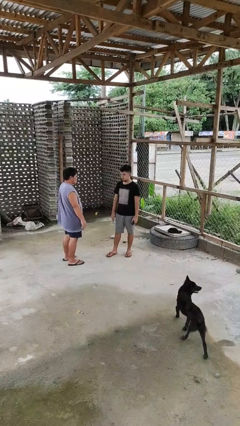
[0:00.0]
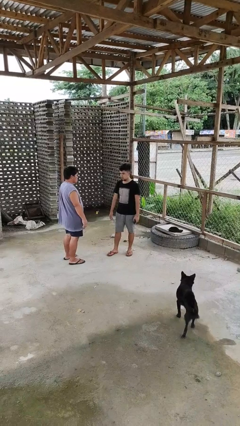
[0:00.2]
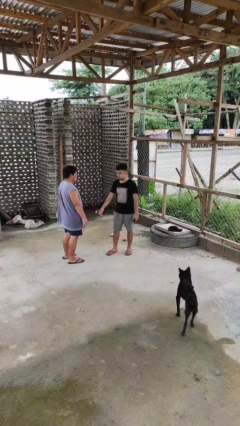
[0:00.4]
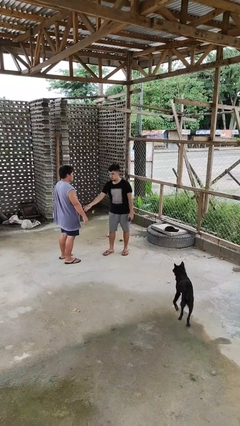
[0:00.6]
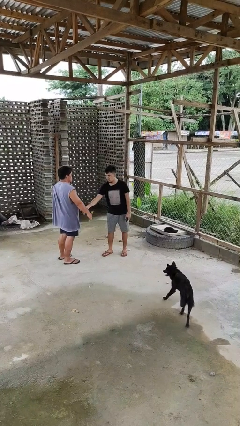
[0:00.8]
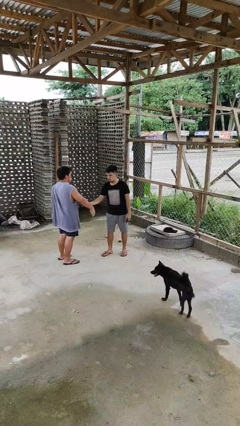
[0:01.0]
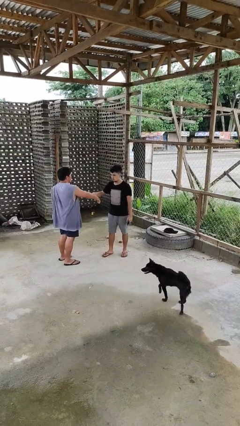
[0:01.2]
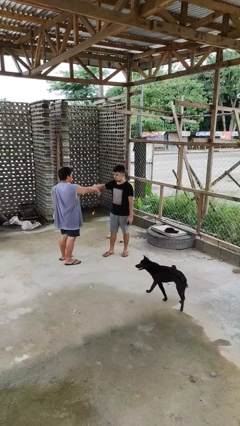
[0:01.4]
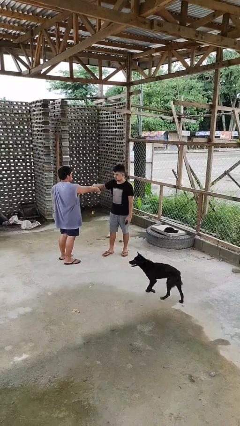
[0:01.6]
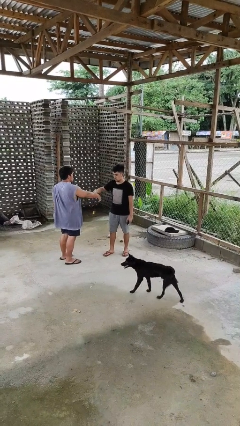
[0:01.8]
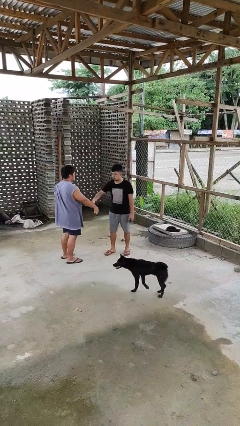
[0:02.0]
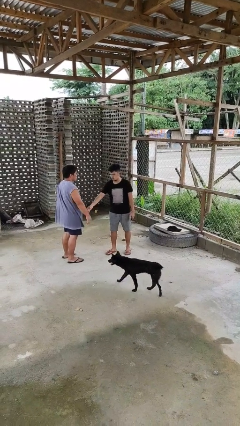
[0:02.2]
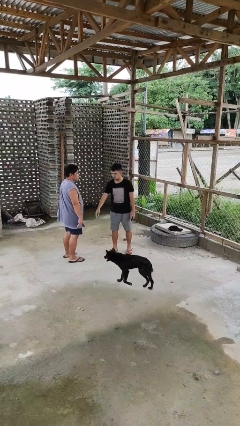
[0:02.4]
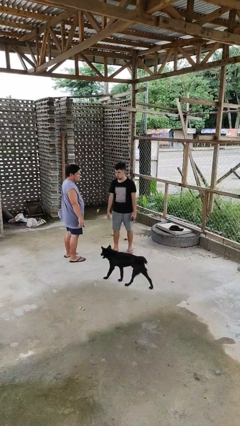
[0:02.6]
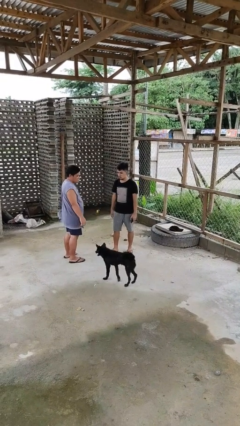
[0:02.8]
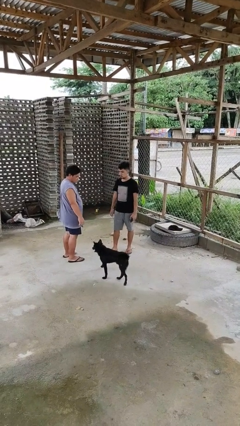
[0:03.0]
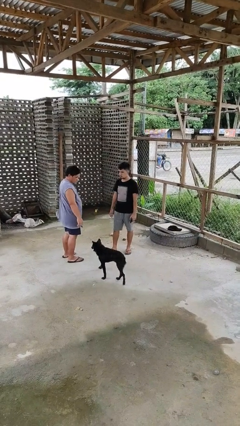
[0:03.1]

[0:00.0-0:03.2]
person grabs person by forearm

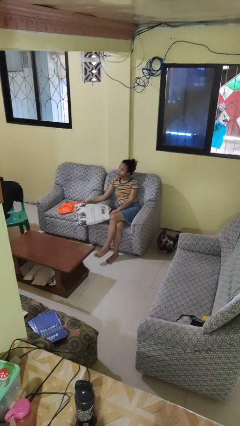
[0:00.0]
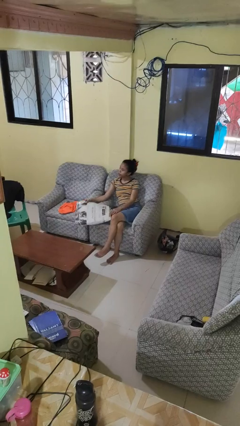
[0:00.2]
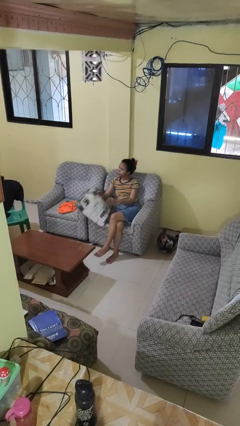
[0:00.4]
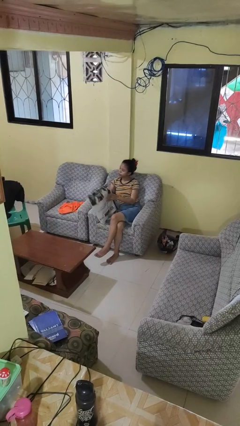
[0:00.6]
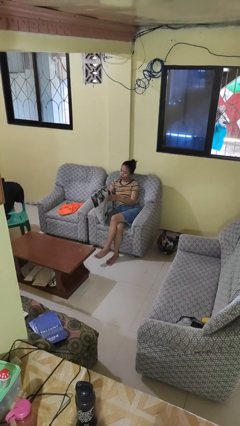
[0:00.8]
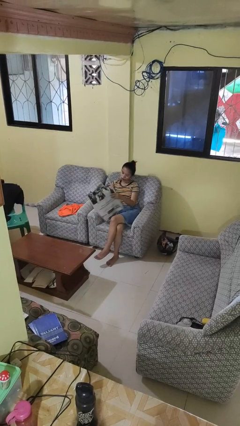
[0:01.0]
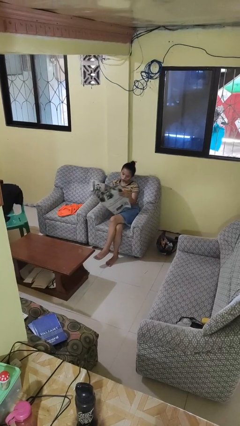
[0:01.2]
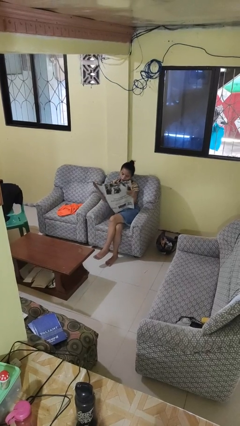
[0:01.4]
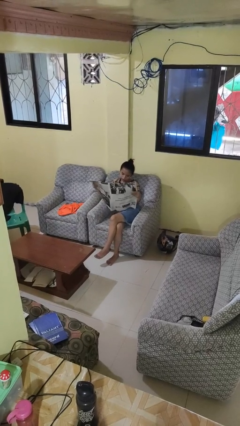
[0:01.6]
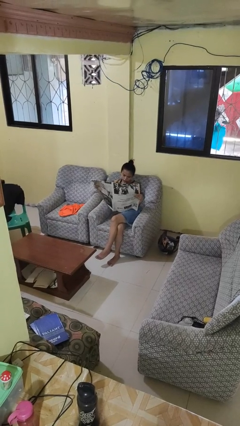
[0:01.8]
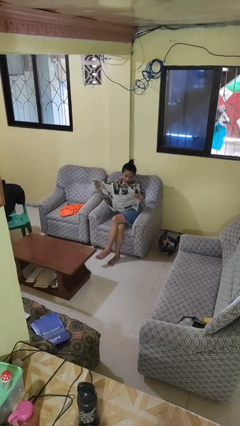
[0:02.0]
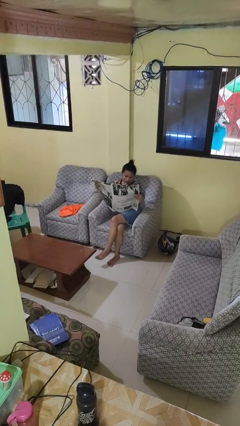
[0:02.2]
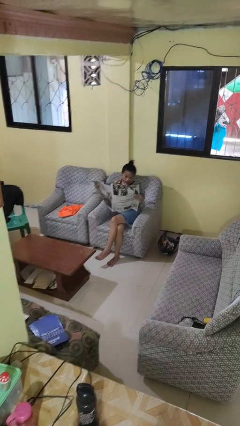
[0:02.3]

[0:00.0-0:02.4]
person reads newspaper

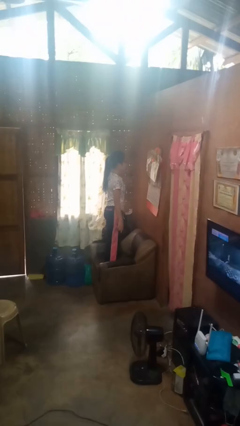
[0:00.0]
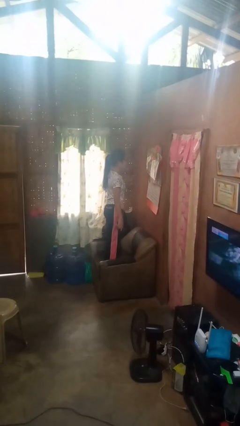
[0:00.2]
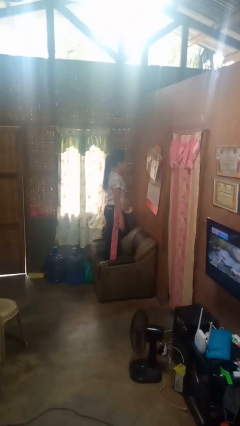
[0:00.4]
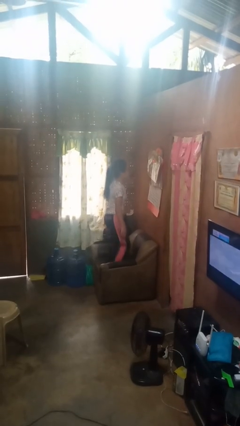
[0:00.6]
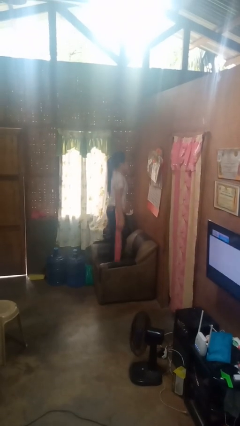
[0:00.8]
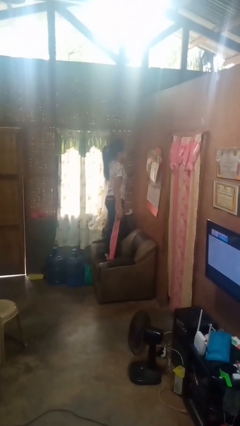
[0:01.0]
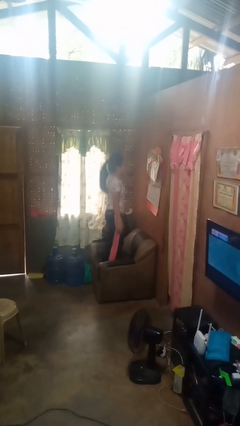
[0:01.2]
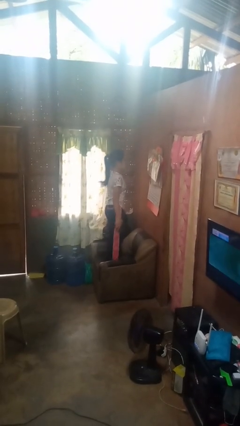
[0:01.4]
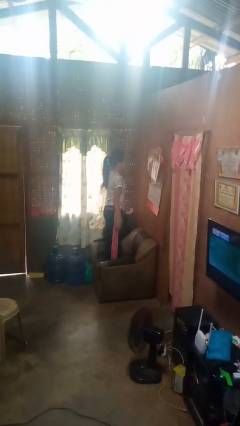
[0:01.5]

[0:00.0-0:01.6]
person jumps on couch

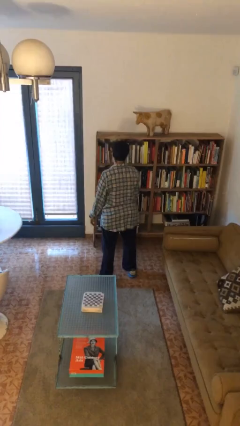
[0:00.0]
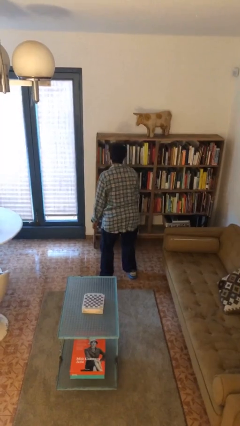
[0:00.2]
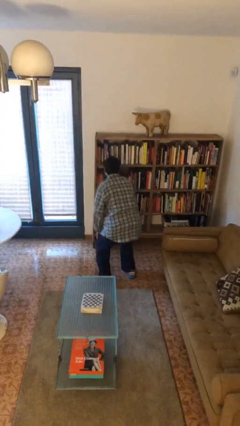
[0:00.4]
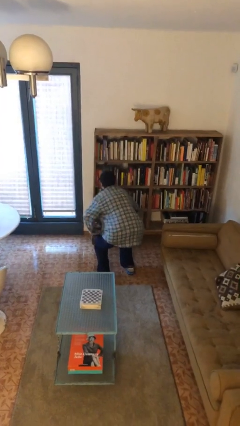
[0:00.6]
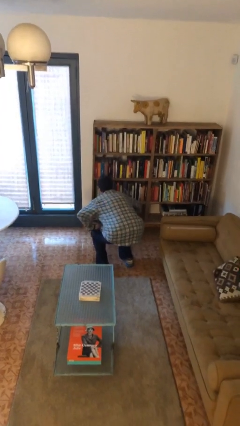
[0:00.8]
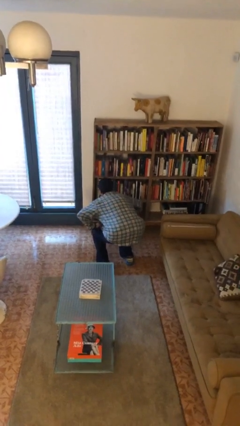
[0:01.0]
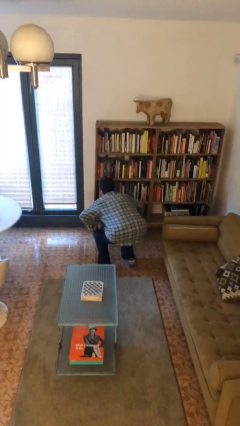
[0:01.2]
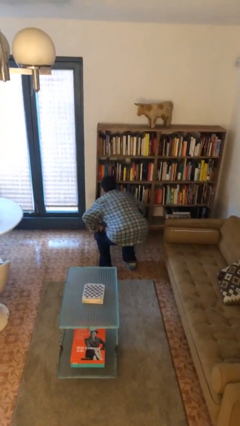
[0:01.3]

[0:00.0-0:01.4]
person squats

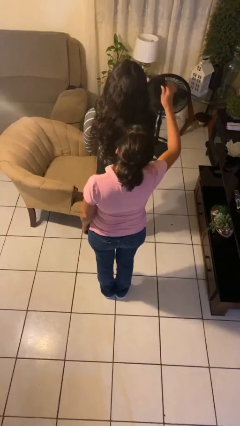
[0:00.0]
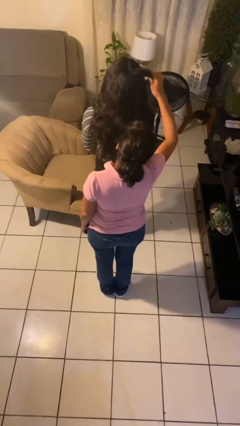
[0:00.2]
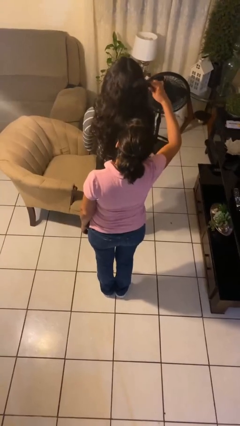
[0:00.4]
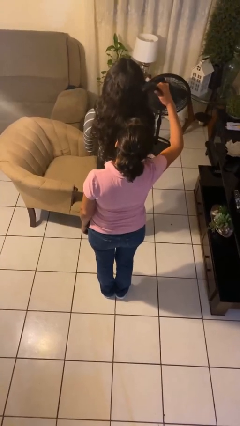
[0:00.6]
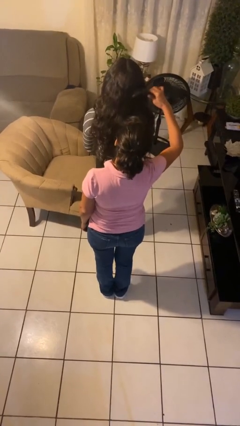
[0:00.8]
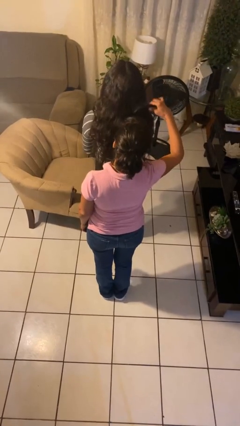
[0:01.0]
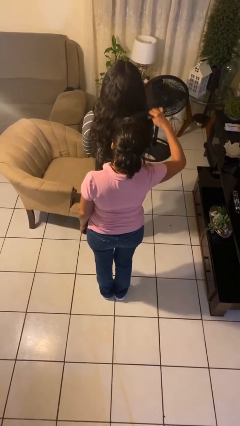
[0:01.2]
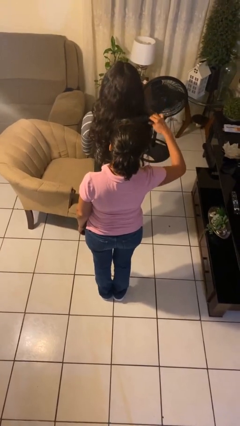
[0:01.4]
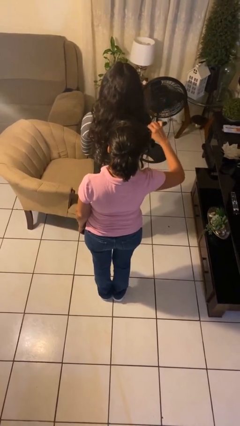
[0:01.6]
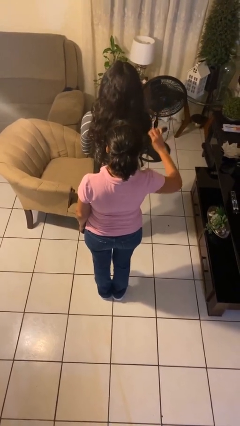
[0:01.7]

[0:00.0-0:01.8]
person brushes hair of person

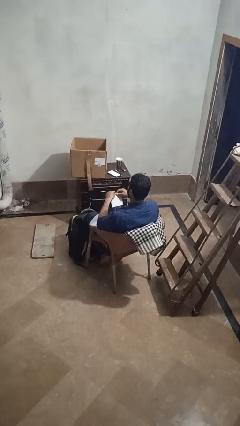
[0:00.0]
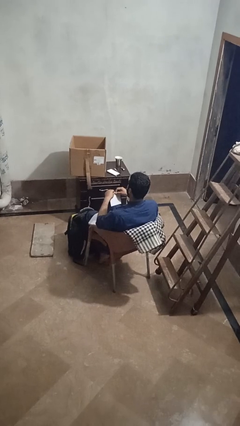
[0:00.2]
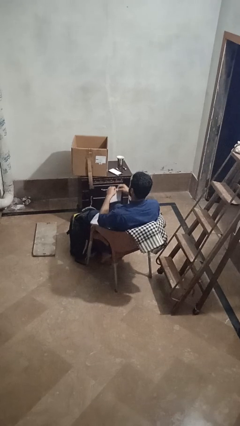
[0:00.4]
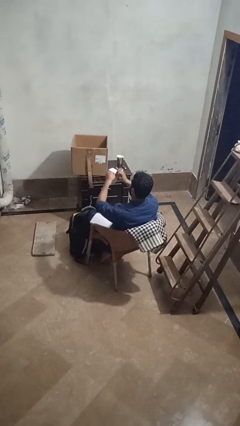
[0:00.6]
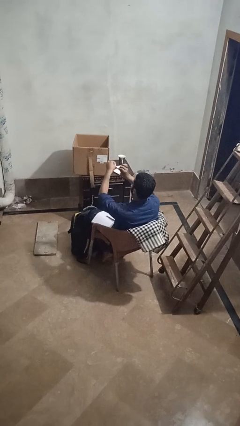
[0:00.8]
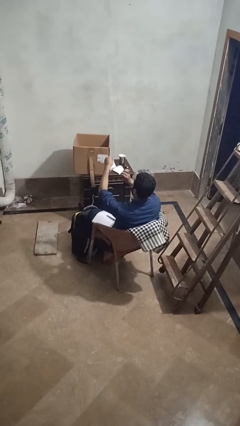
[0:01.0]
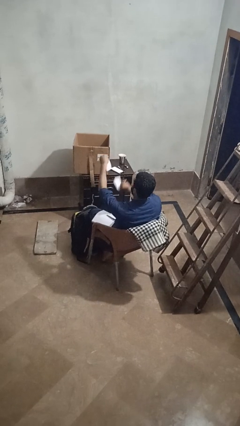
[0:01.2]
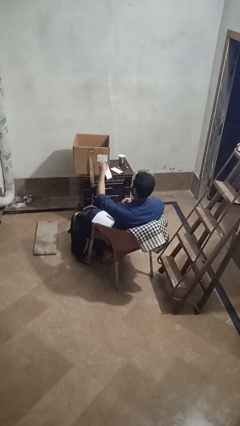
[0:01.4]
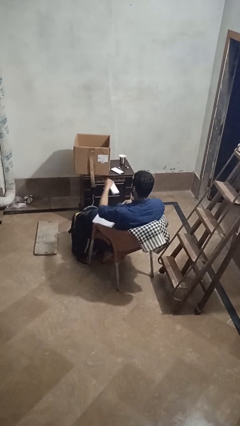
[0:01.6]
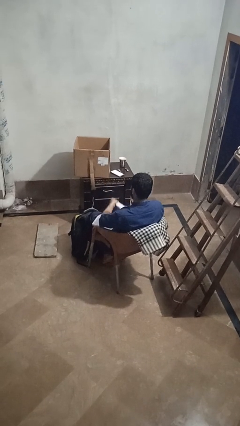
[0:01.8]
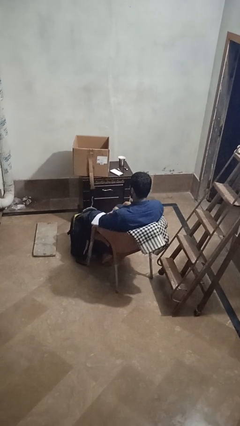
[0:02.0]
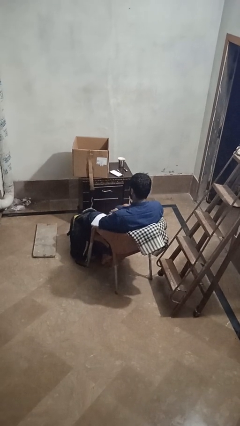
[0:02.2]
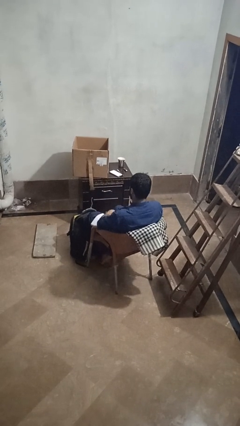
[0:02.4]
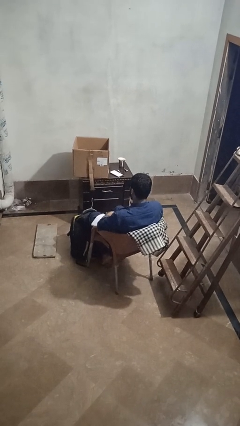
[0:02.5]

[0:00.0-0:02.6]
person tears paper

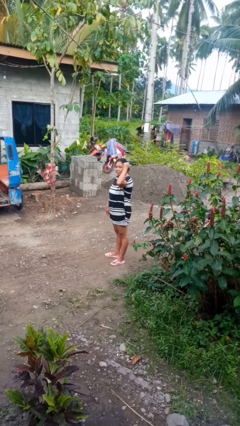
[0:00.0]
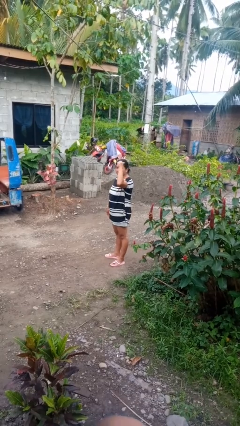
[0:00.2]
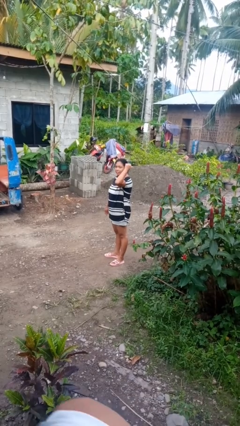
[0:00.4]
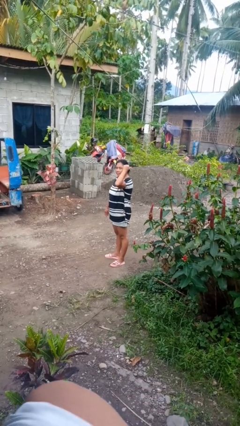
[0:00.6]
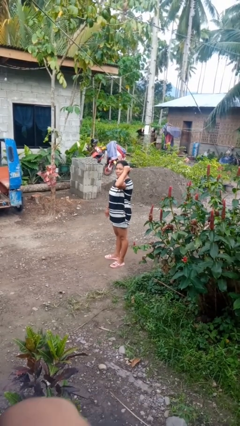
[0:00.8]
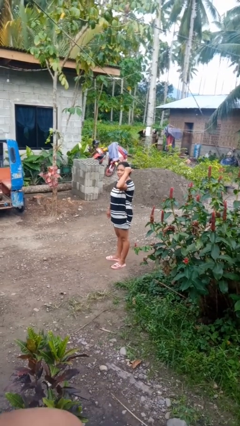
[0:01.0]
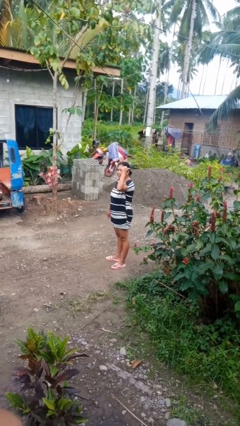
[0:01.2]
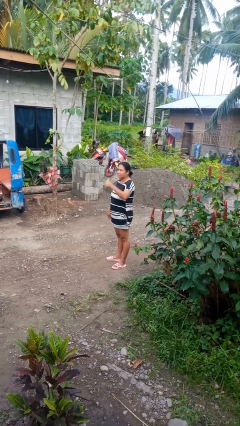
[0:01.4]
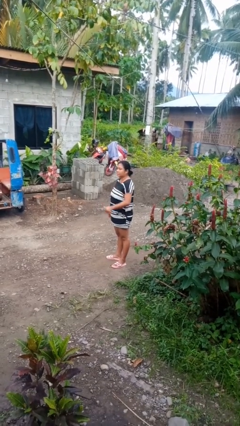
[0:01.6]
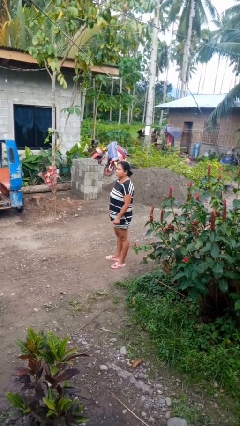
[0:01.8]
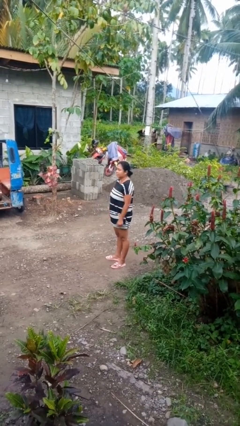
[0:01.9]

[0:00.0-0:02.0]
person gestures behind me

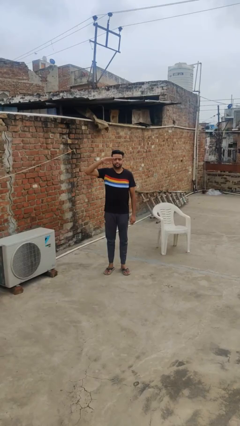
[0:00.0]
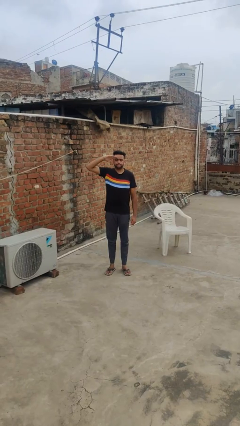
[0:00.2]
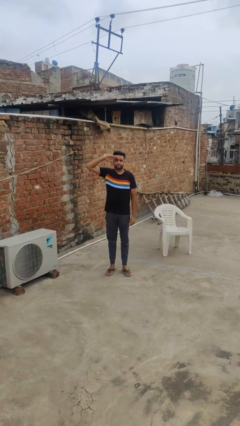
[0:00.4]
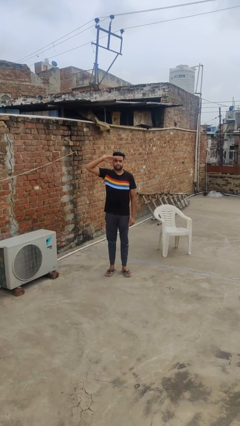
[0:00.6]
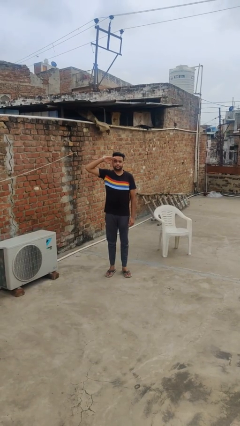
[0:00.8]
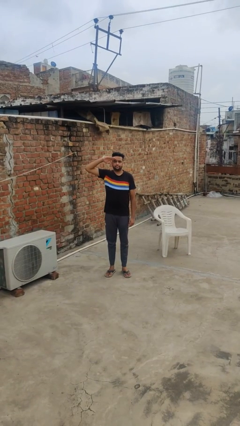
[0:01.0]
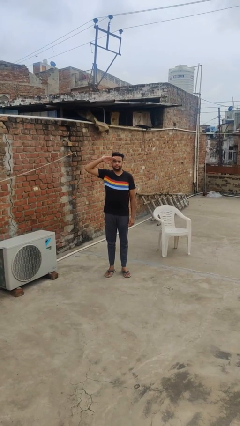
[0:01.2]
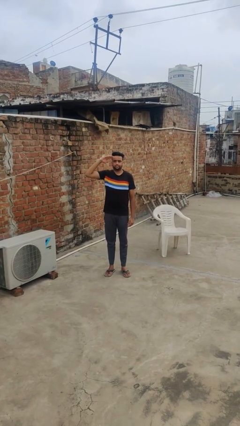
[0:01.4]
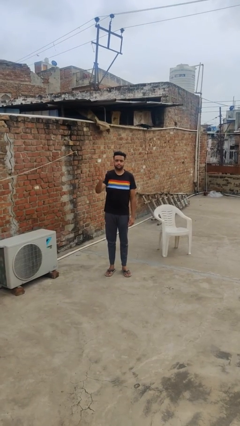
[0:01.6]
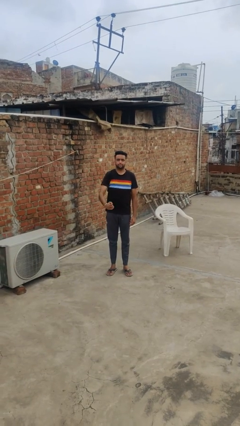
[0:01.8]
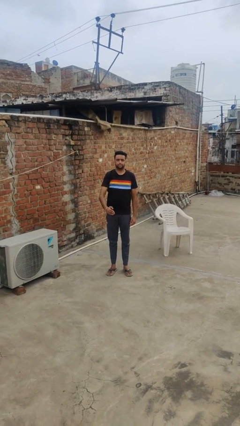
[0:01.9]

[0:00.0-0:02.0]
person salutes
